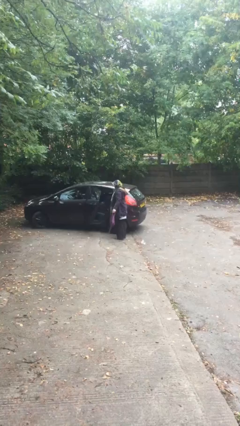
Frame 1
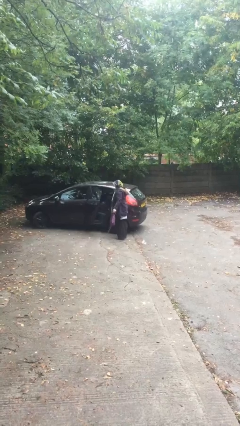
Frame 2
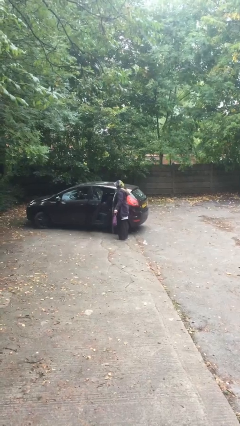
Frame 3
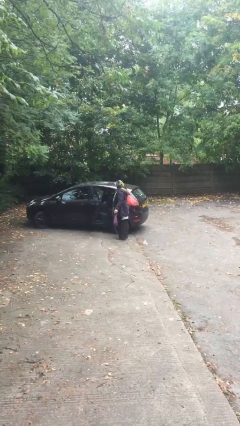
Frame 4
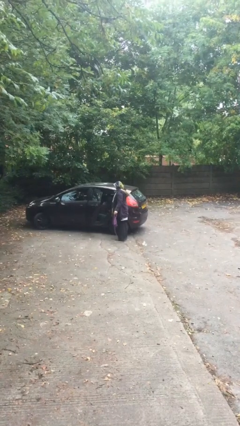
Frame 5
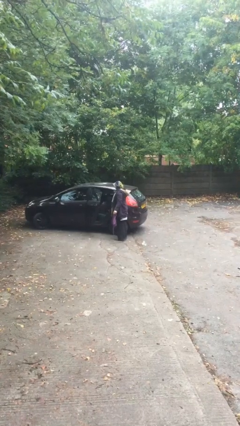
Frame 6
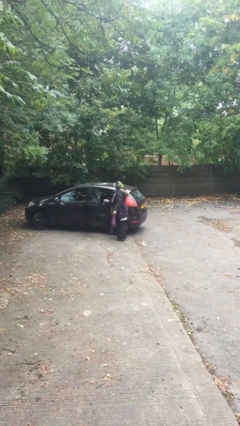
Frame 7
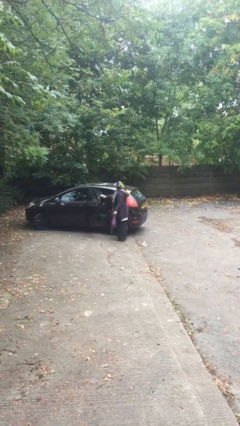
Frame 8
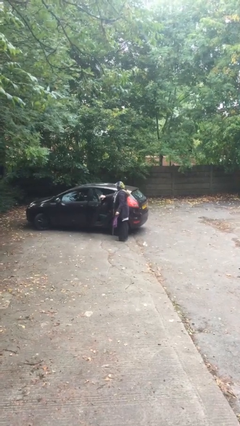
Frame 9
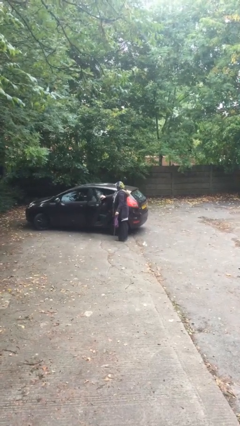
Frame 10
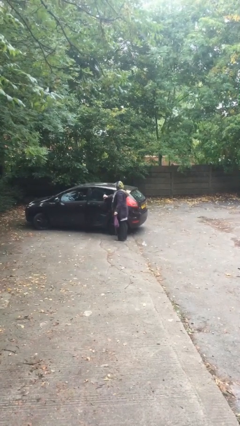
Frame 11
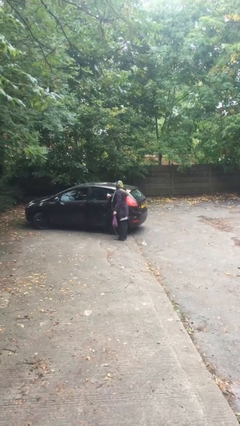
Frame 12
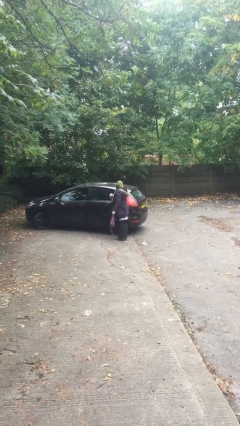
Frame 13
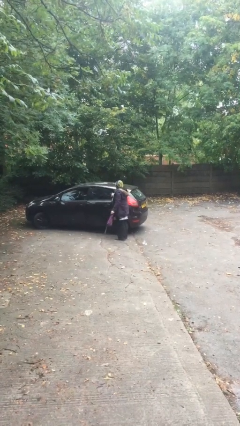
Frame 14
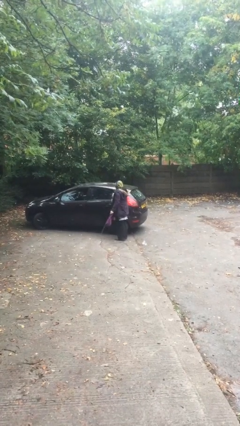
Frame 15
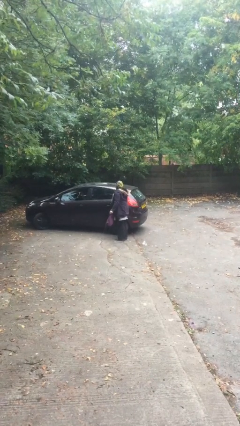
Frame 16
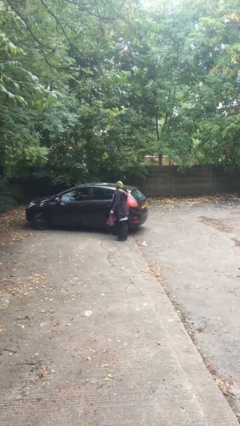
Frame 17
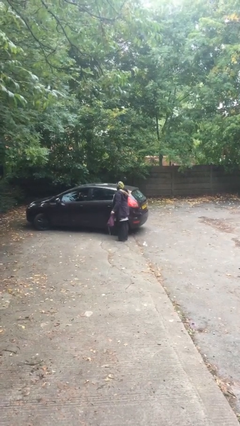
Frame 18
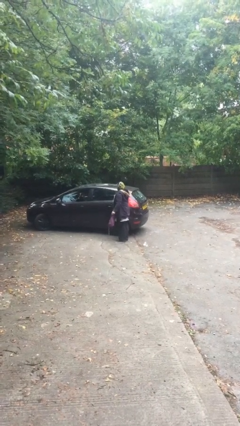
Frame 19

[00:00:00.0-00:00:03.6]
person closes car door

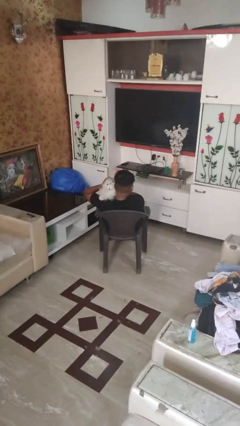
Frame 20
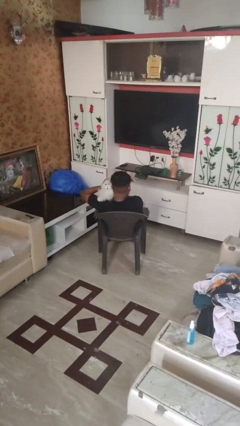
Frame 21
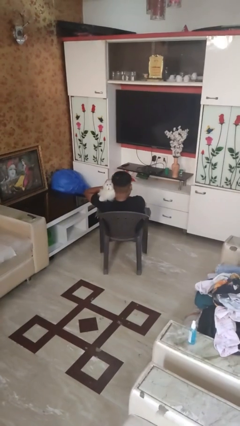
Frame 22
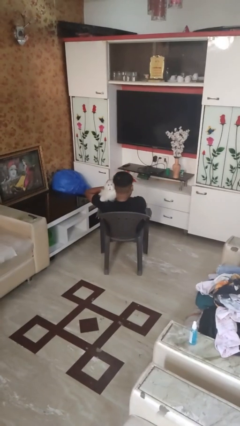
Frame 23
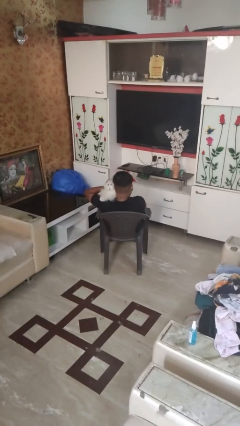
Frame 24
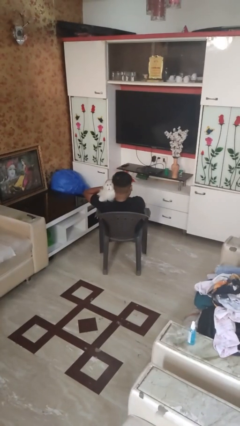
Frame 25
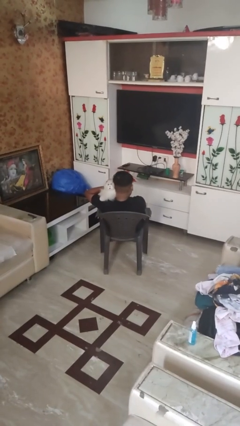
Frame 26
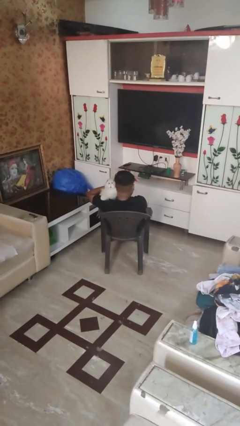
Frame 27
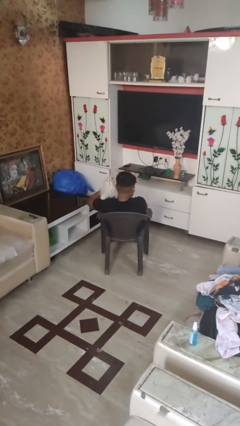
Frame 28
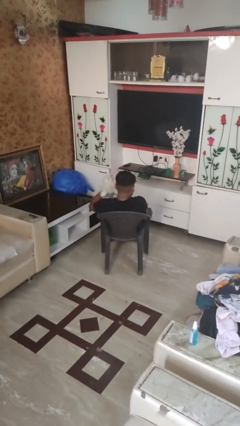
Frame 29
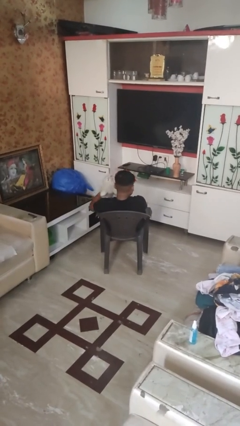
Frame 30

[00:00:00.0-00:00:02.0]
person hugs stuffed animal

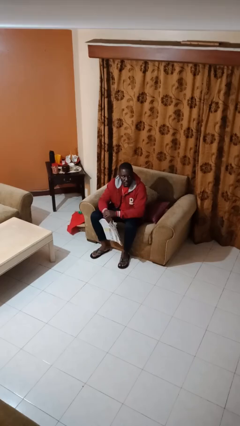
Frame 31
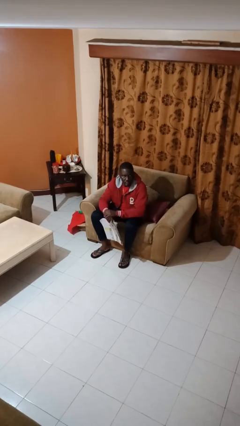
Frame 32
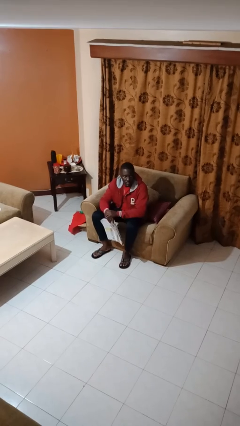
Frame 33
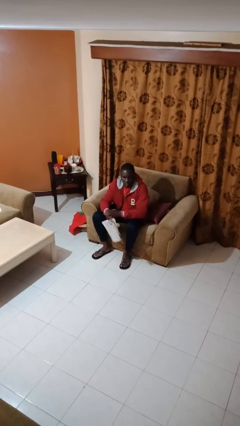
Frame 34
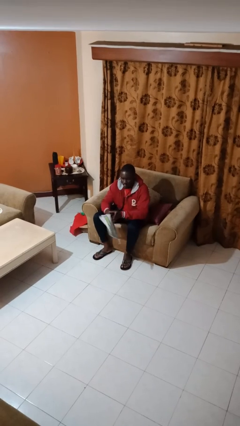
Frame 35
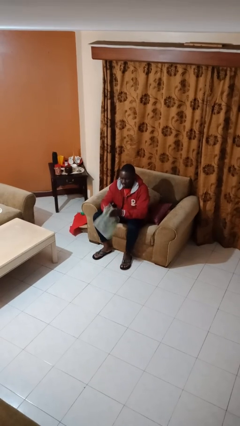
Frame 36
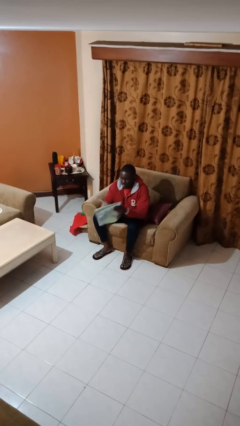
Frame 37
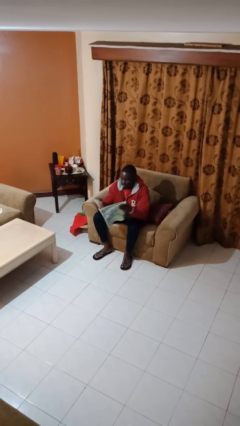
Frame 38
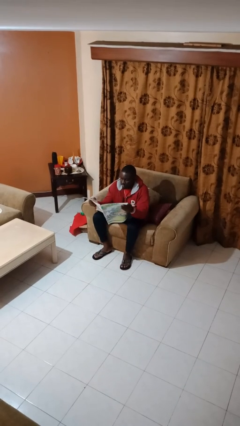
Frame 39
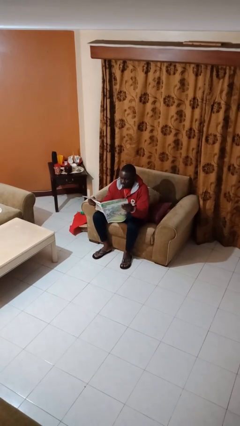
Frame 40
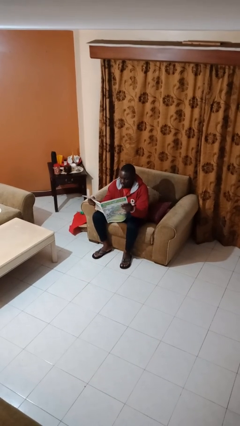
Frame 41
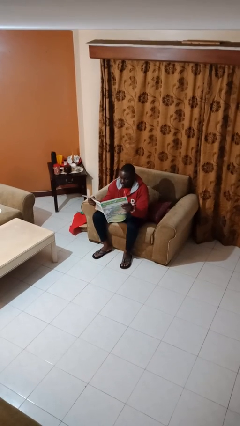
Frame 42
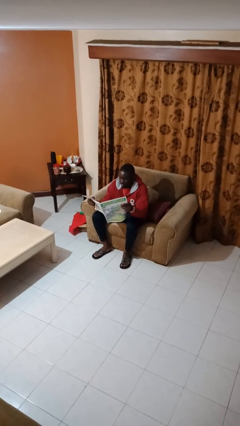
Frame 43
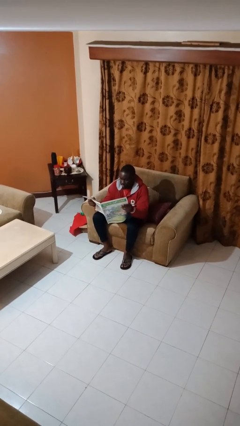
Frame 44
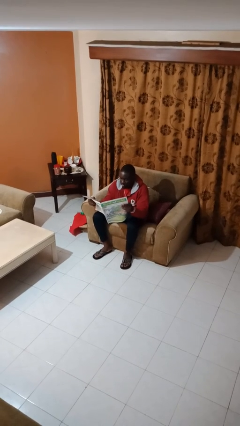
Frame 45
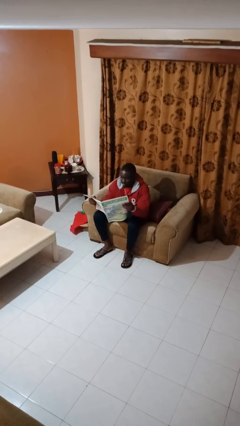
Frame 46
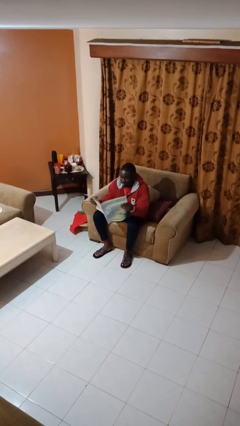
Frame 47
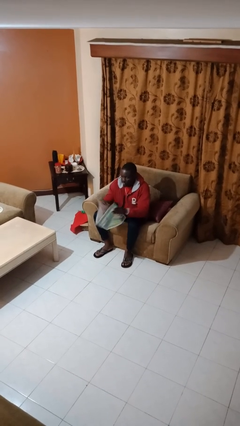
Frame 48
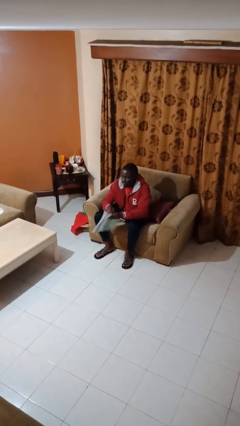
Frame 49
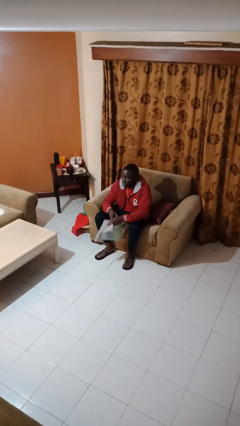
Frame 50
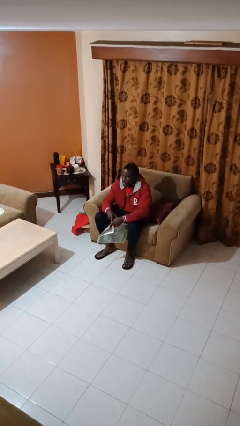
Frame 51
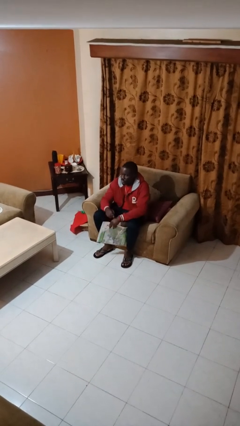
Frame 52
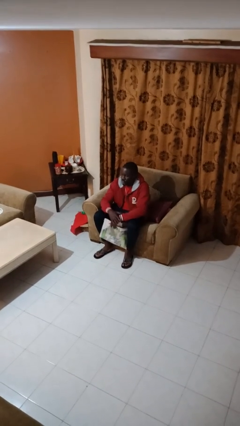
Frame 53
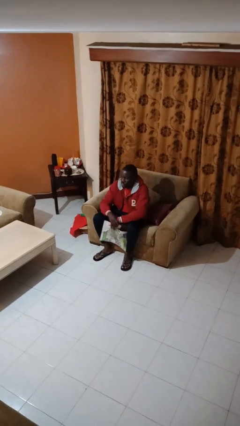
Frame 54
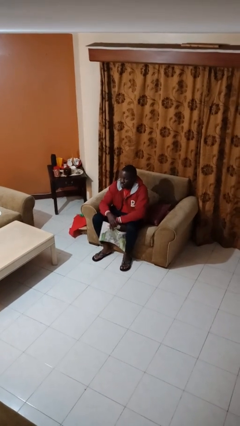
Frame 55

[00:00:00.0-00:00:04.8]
person reads newspaper

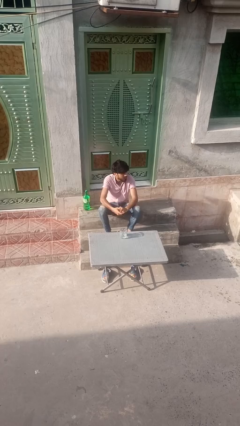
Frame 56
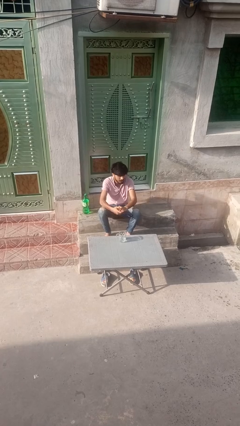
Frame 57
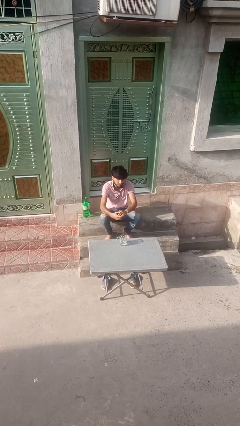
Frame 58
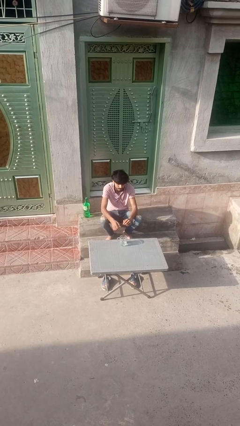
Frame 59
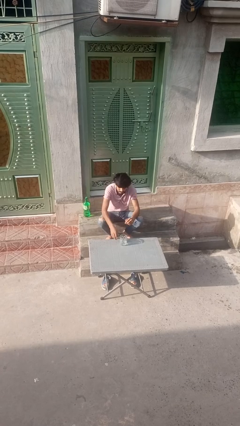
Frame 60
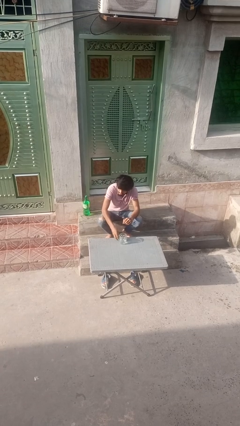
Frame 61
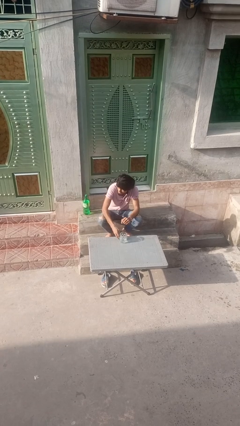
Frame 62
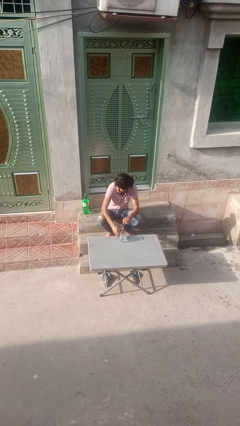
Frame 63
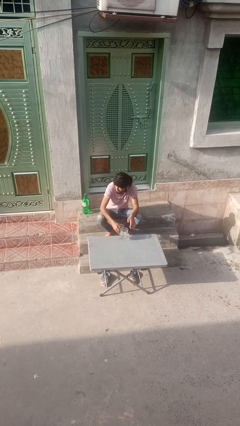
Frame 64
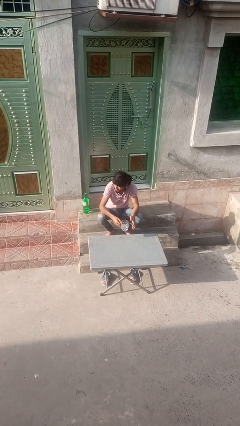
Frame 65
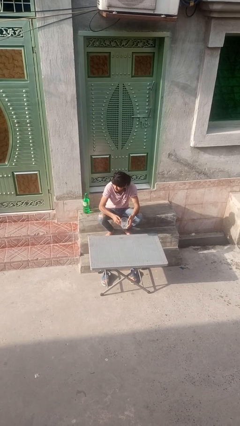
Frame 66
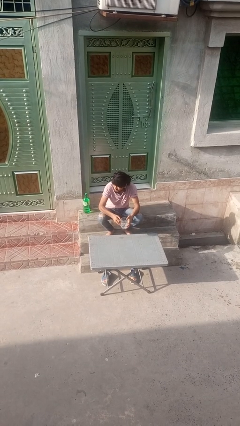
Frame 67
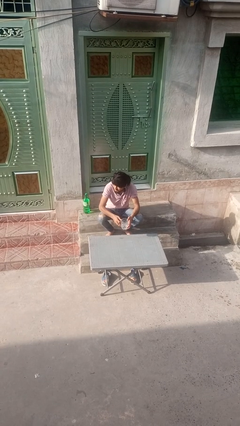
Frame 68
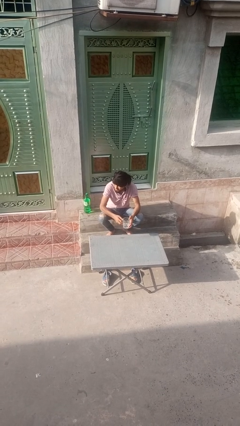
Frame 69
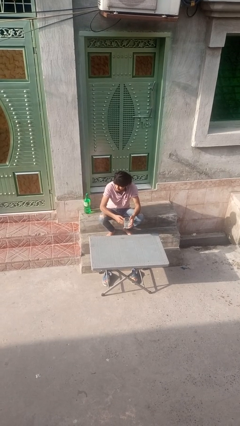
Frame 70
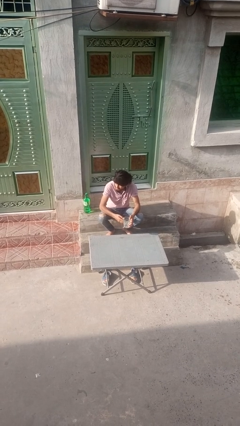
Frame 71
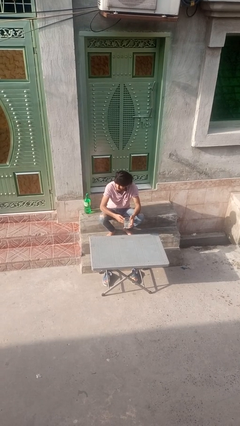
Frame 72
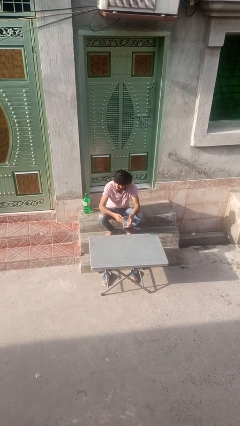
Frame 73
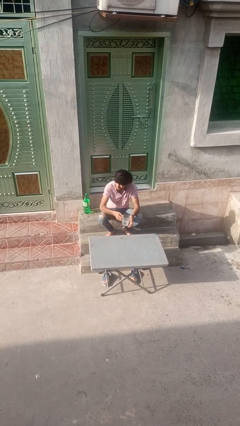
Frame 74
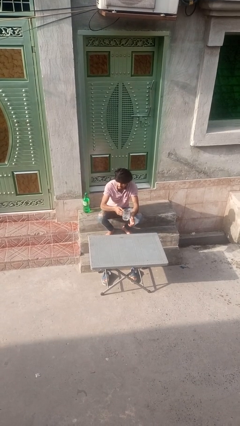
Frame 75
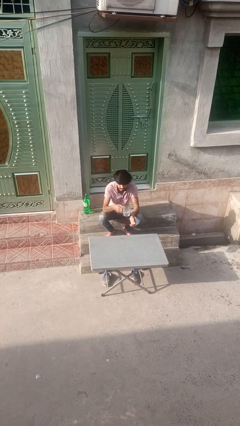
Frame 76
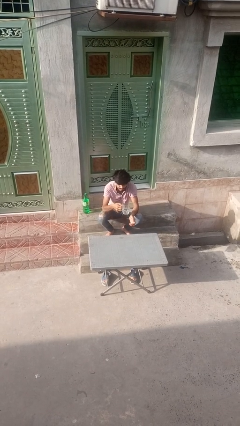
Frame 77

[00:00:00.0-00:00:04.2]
person picks up object from table

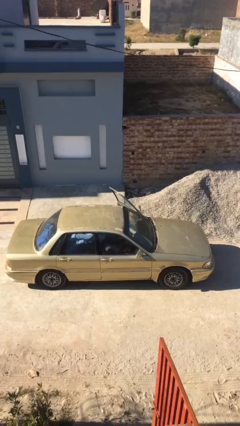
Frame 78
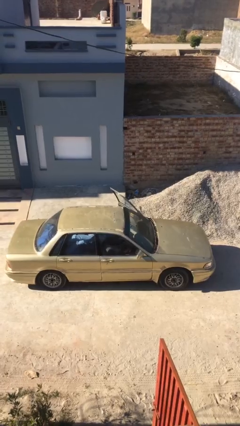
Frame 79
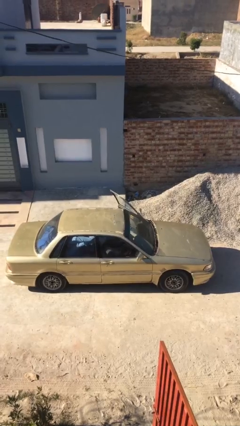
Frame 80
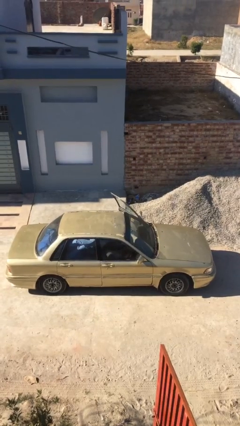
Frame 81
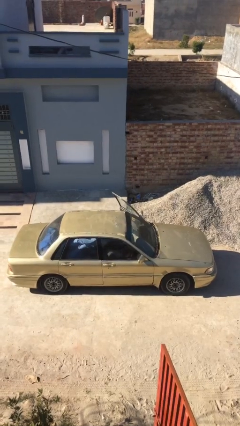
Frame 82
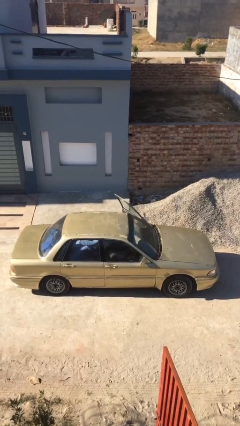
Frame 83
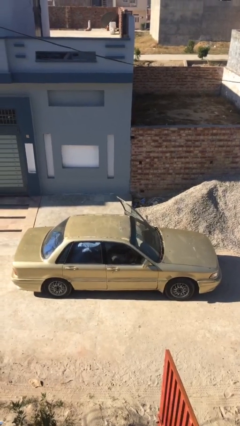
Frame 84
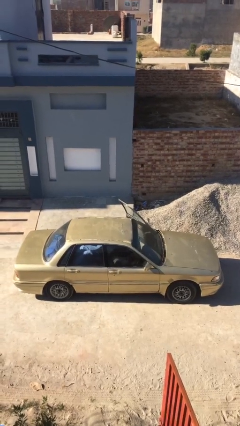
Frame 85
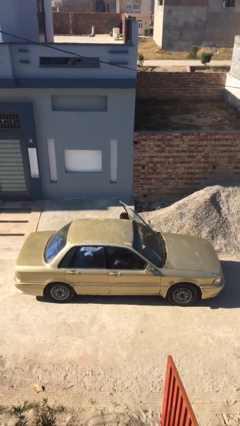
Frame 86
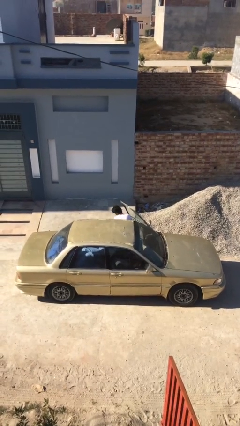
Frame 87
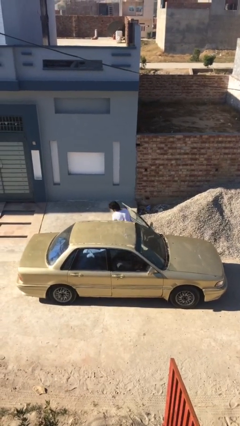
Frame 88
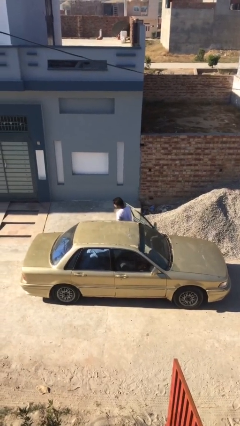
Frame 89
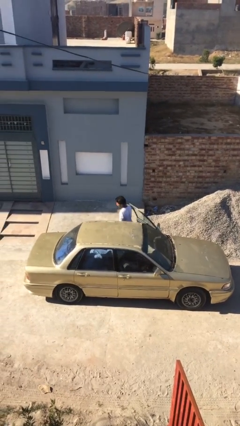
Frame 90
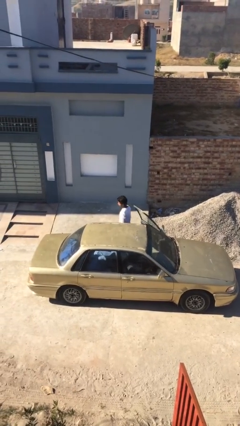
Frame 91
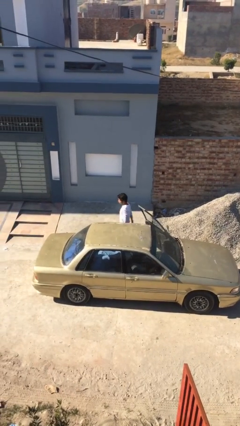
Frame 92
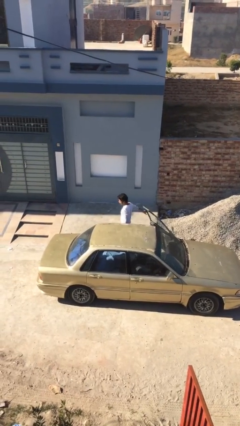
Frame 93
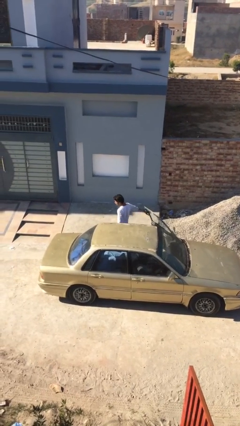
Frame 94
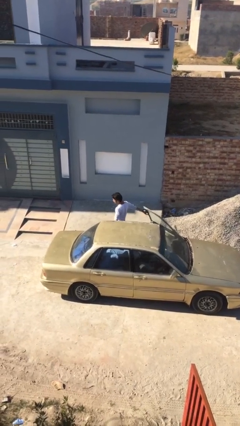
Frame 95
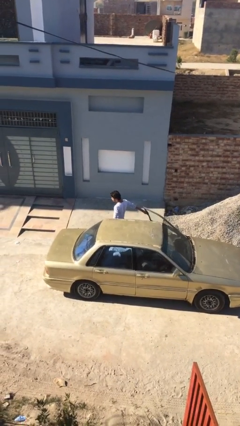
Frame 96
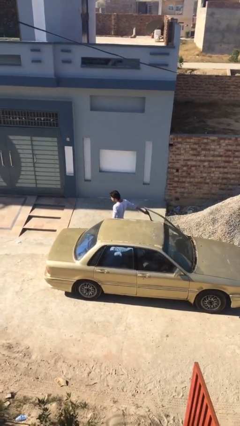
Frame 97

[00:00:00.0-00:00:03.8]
person exits car
